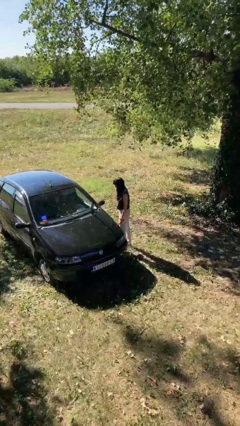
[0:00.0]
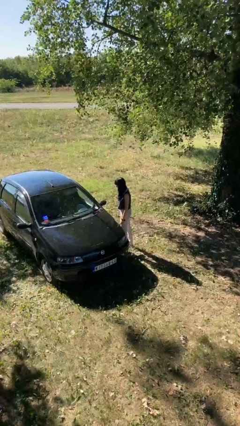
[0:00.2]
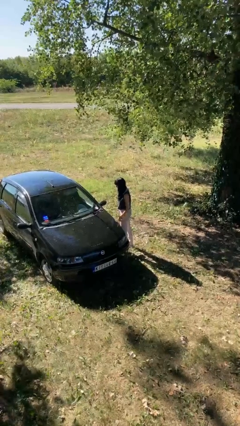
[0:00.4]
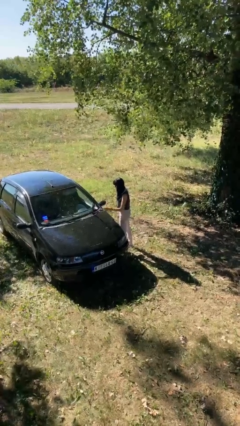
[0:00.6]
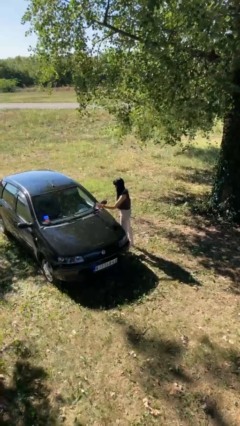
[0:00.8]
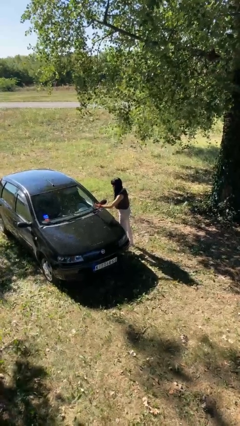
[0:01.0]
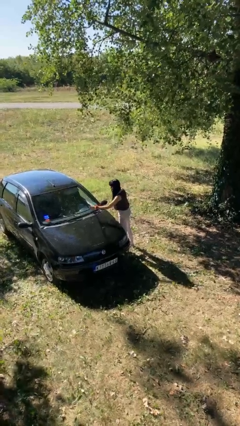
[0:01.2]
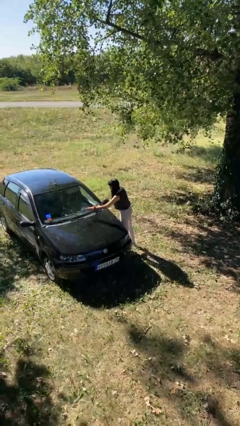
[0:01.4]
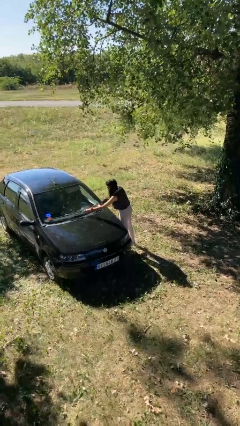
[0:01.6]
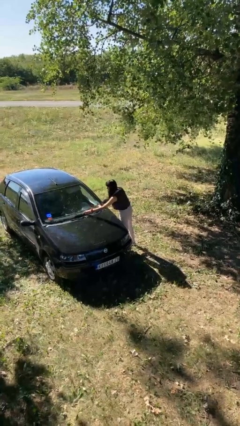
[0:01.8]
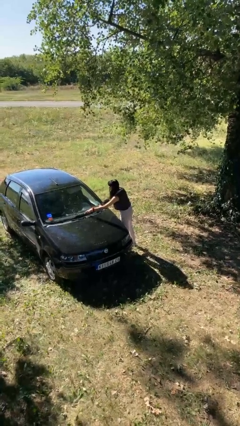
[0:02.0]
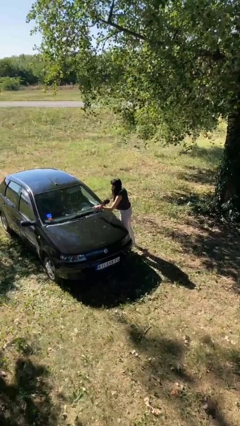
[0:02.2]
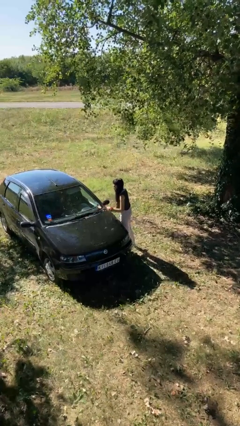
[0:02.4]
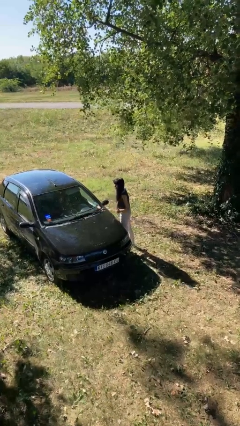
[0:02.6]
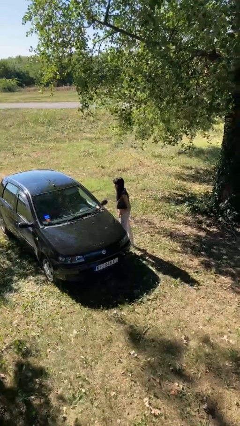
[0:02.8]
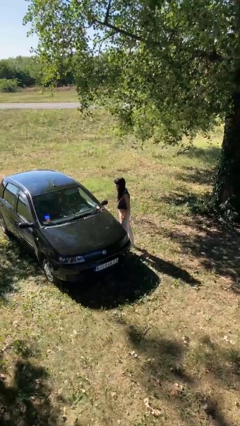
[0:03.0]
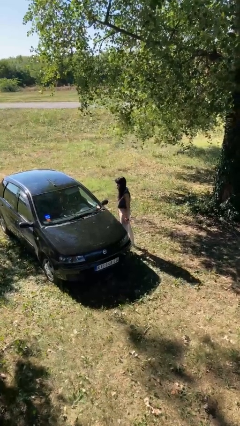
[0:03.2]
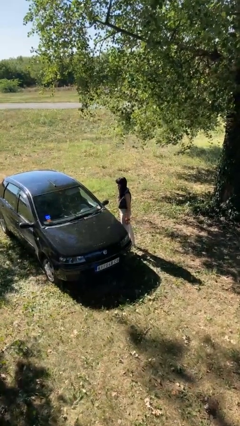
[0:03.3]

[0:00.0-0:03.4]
person flips down car wipers

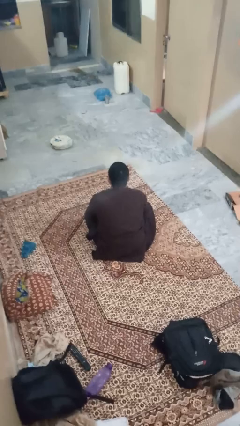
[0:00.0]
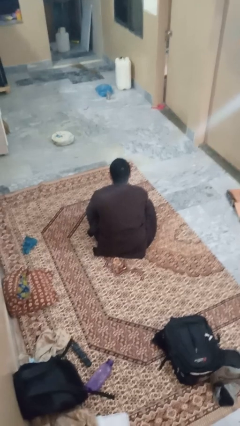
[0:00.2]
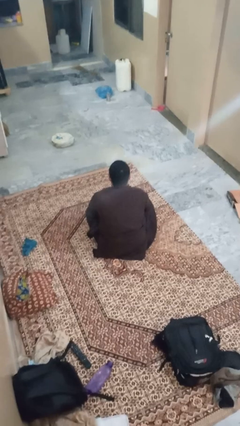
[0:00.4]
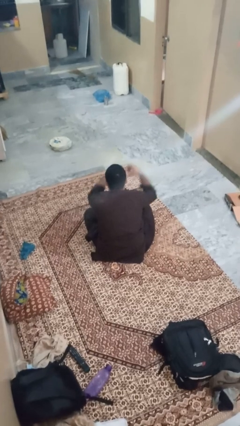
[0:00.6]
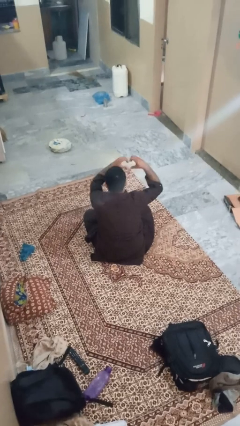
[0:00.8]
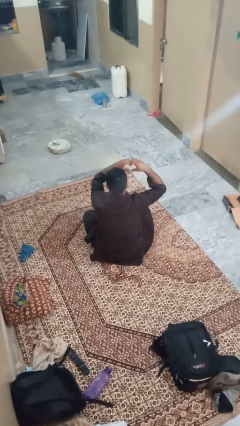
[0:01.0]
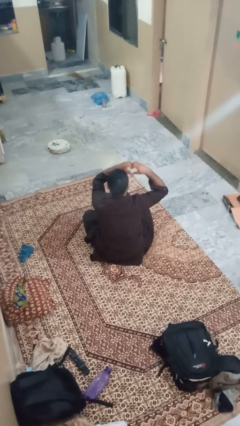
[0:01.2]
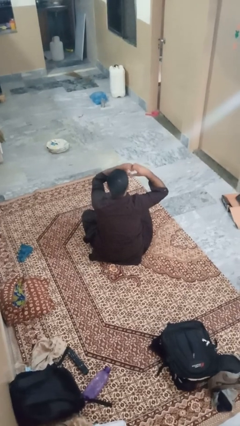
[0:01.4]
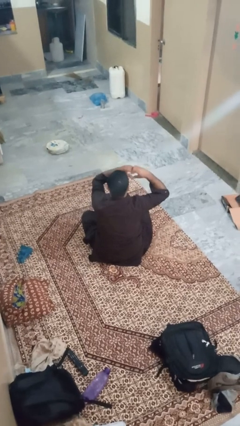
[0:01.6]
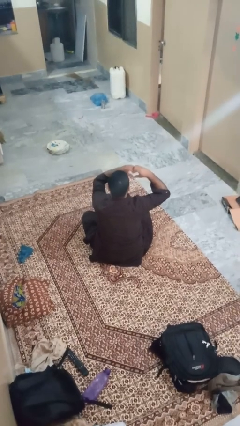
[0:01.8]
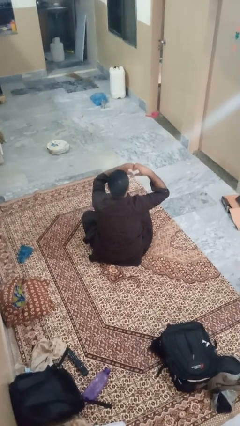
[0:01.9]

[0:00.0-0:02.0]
person gestures heart

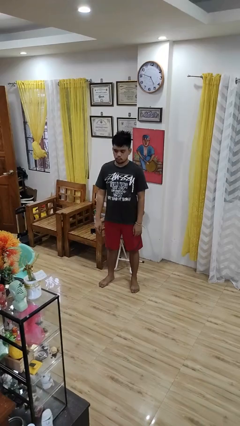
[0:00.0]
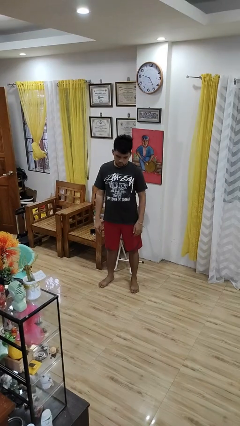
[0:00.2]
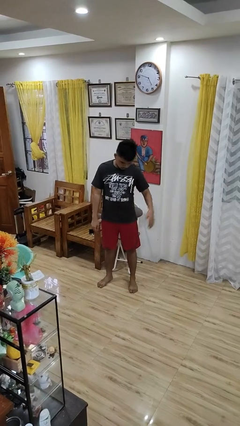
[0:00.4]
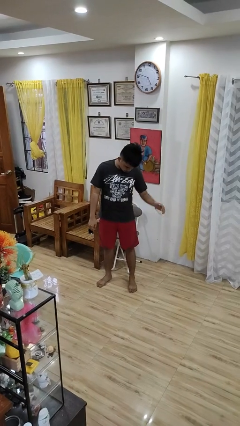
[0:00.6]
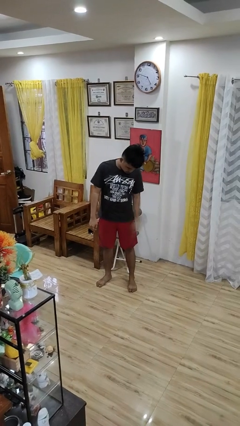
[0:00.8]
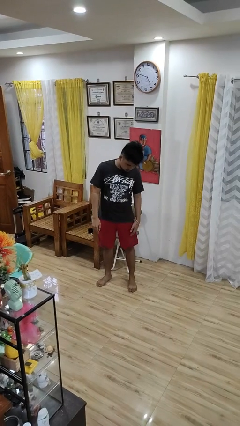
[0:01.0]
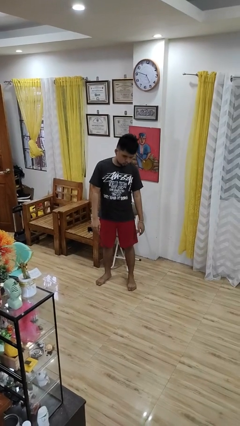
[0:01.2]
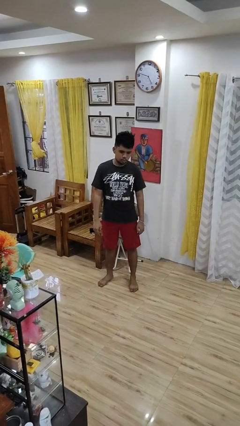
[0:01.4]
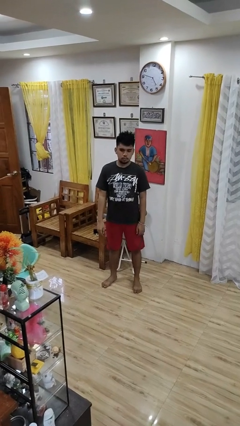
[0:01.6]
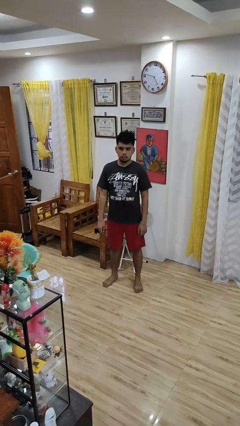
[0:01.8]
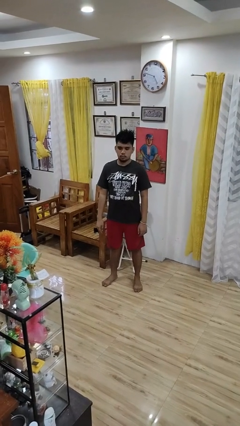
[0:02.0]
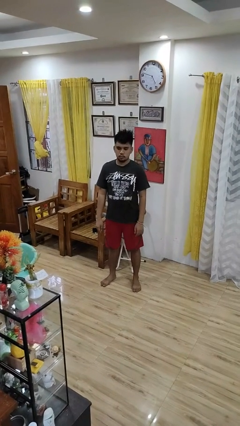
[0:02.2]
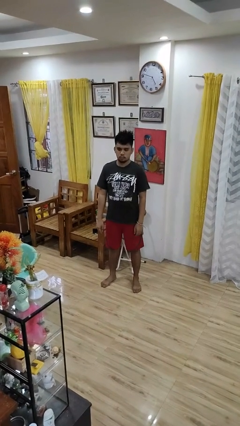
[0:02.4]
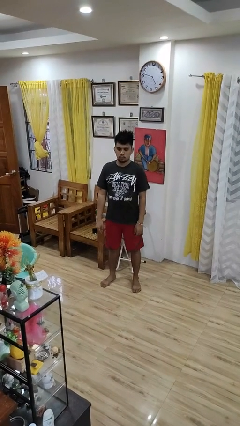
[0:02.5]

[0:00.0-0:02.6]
person slaps hands on thighs

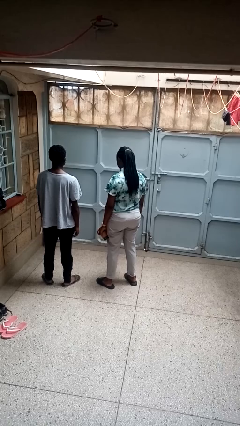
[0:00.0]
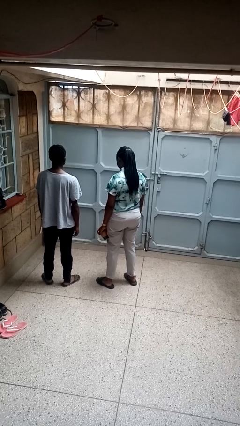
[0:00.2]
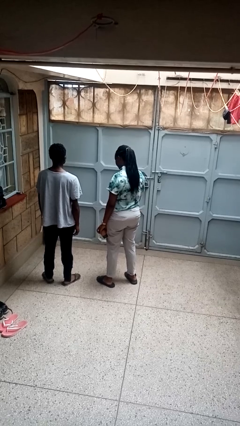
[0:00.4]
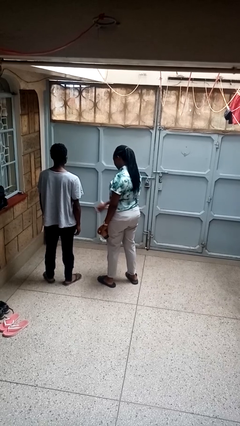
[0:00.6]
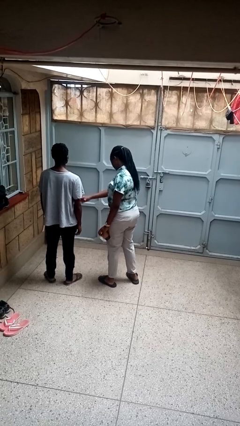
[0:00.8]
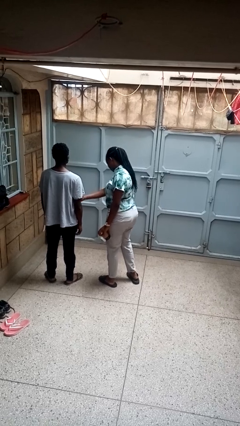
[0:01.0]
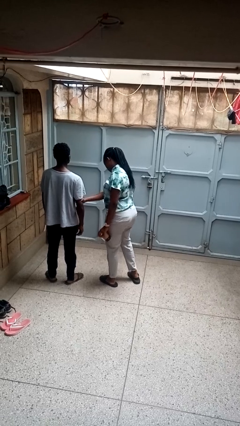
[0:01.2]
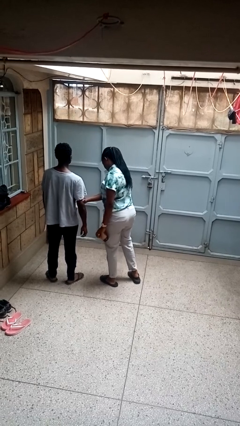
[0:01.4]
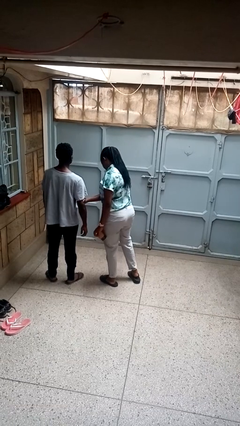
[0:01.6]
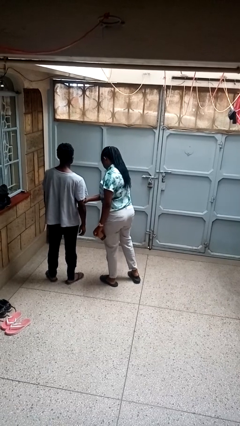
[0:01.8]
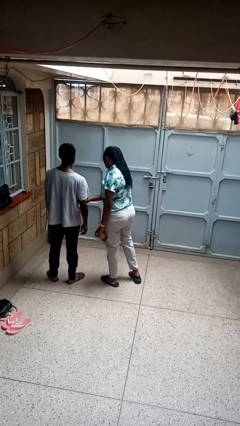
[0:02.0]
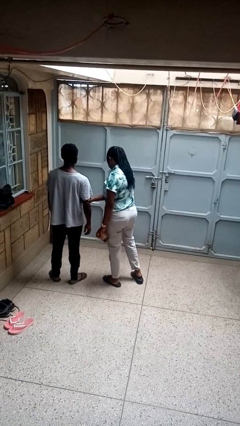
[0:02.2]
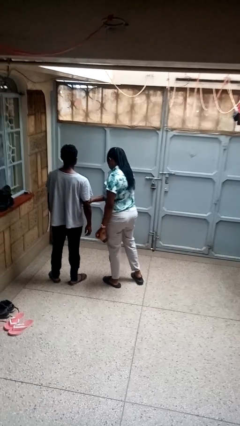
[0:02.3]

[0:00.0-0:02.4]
person grabs person by bicep

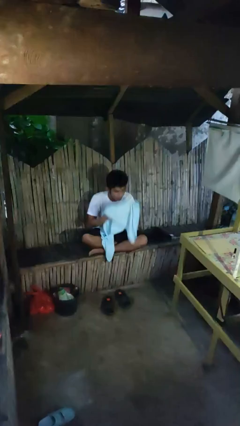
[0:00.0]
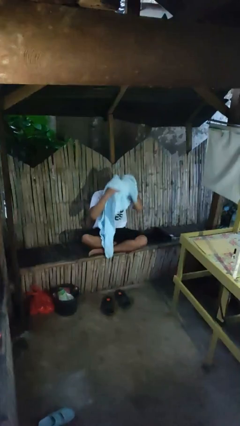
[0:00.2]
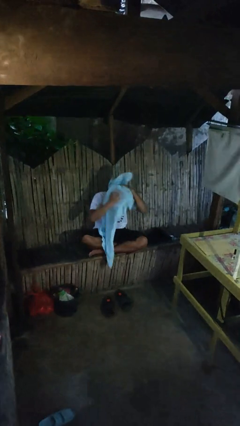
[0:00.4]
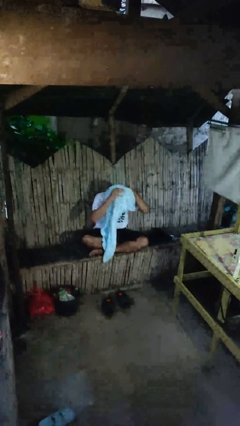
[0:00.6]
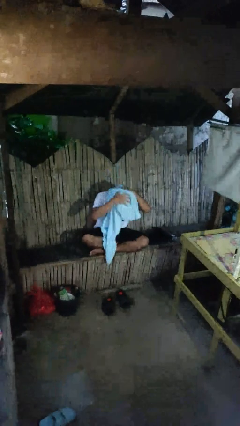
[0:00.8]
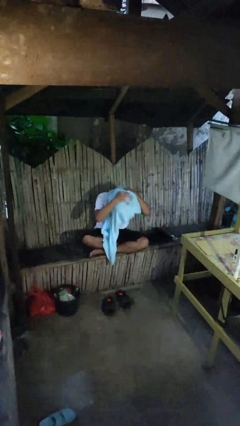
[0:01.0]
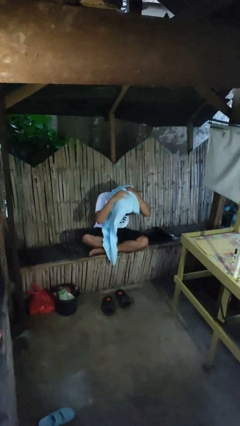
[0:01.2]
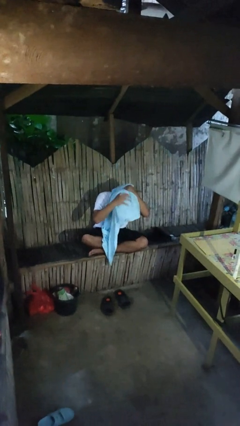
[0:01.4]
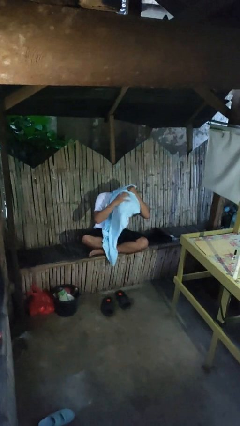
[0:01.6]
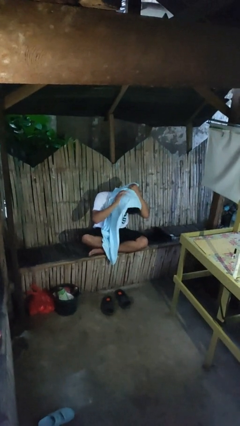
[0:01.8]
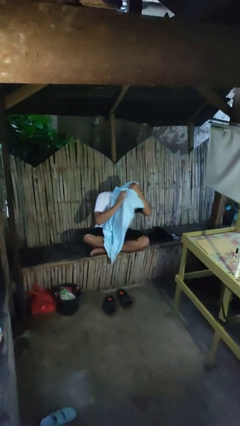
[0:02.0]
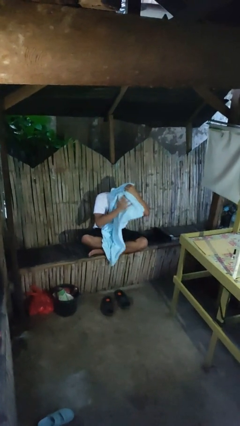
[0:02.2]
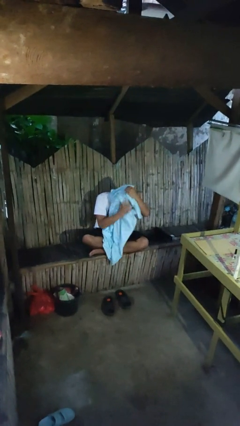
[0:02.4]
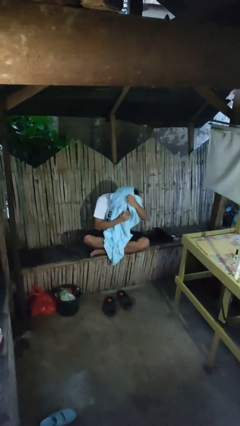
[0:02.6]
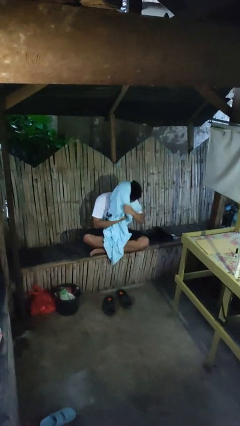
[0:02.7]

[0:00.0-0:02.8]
person dries hair with towel

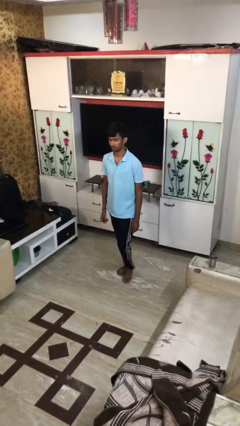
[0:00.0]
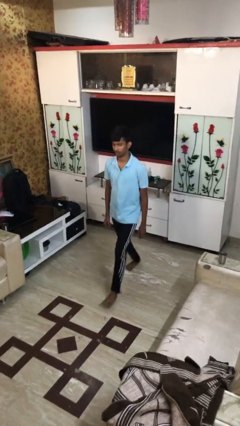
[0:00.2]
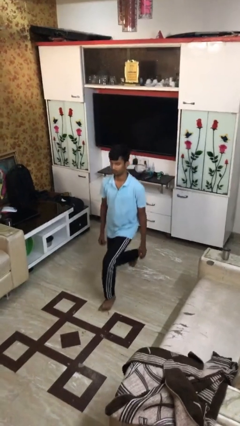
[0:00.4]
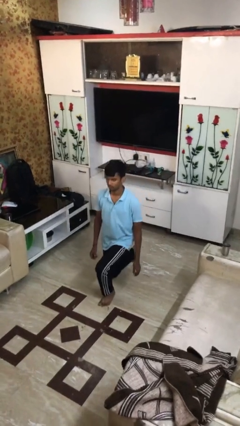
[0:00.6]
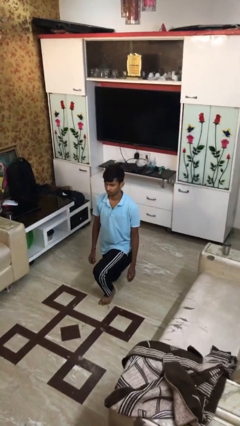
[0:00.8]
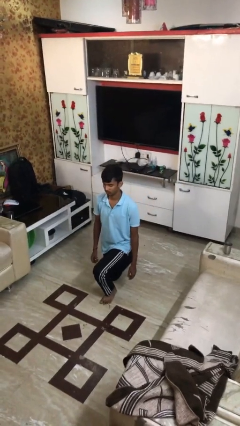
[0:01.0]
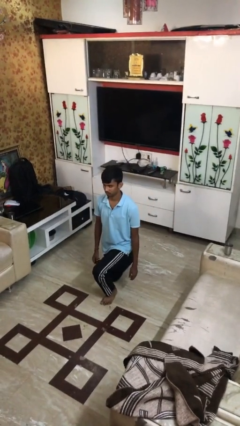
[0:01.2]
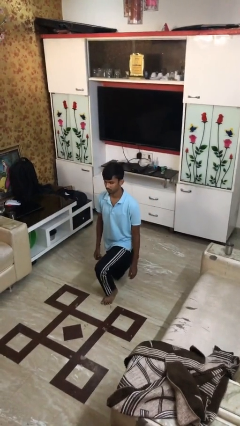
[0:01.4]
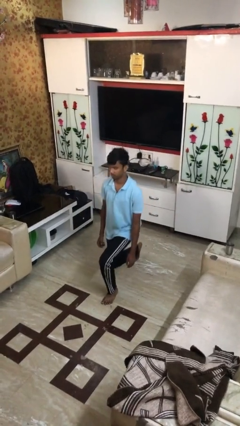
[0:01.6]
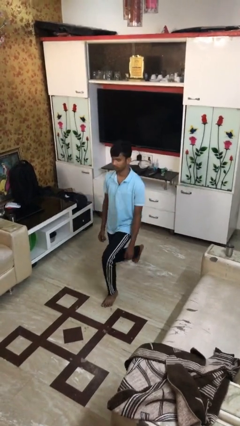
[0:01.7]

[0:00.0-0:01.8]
person exercises with lunges

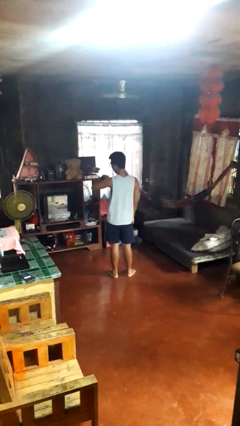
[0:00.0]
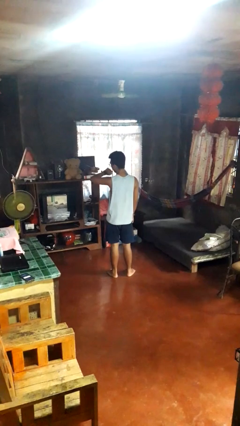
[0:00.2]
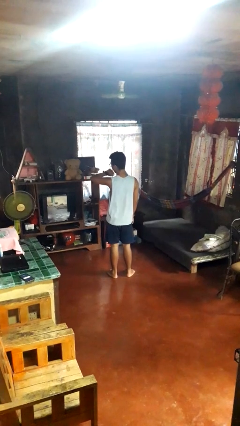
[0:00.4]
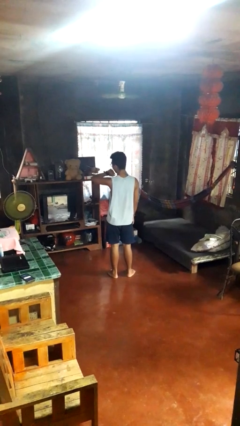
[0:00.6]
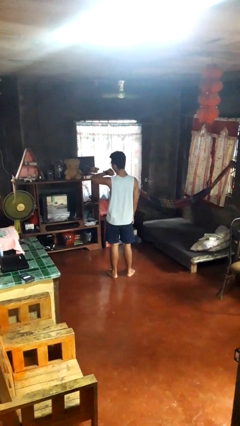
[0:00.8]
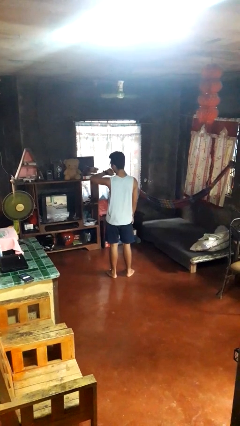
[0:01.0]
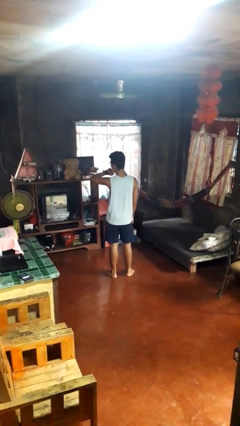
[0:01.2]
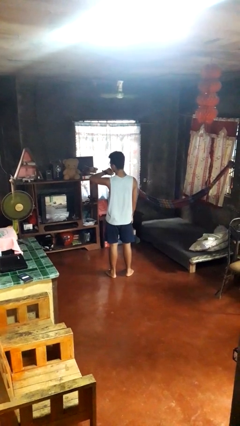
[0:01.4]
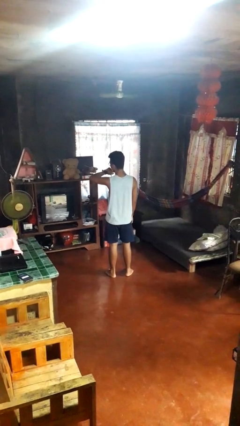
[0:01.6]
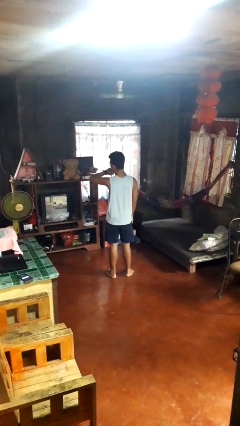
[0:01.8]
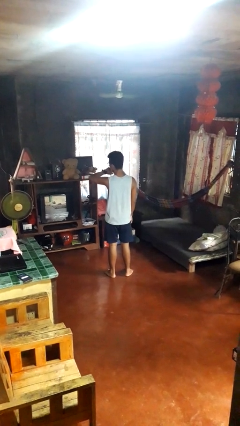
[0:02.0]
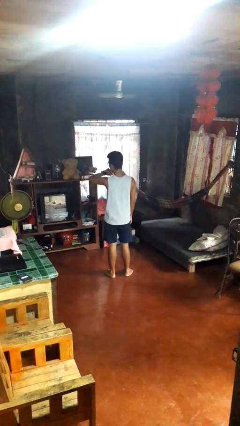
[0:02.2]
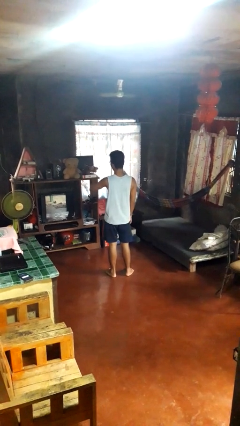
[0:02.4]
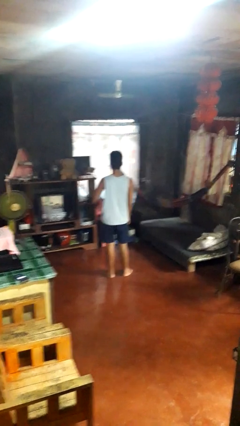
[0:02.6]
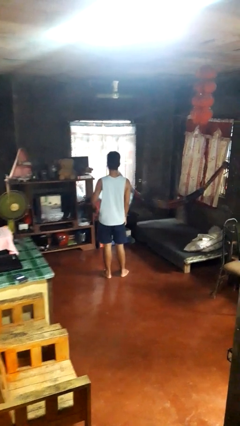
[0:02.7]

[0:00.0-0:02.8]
person looks at wristwatch
